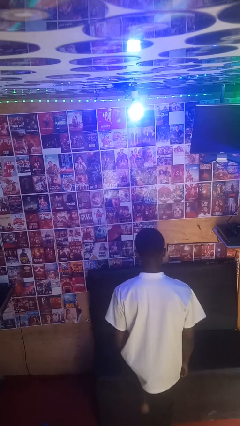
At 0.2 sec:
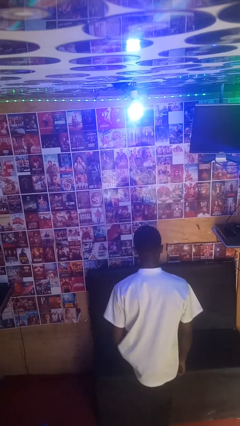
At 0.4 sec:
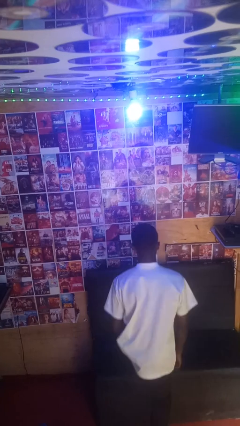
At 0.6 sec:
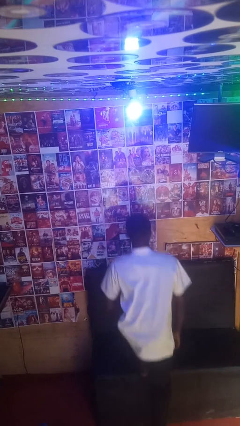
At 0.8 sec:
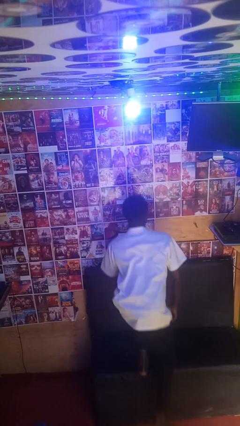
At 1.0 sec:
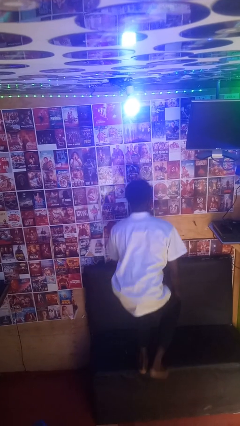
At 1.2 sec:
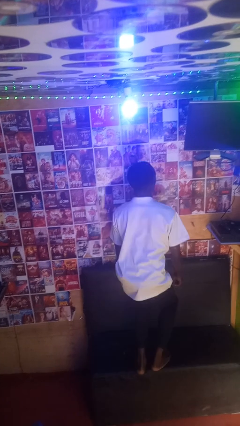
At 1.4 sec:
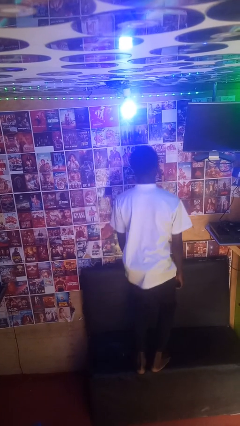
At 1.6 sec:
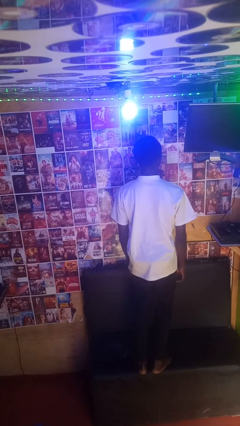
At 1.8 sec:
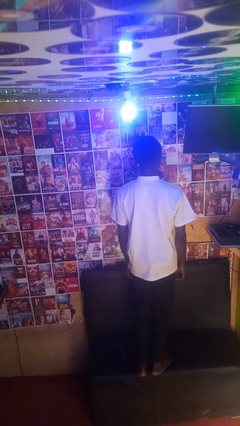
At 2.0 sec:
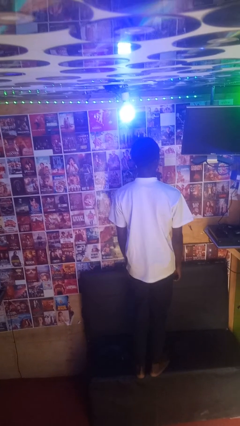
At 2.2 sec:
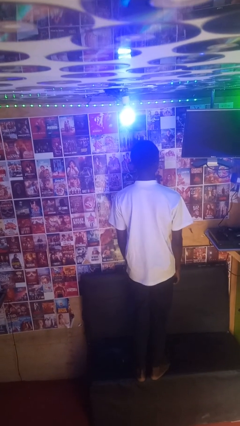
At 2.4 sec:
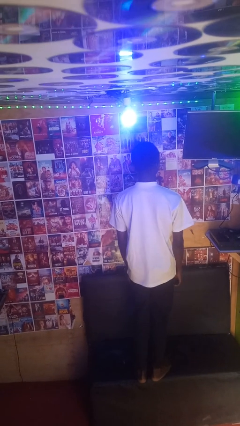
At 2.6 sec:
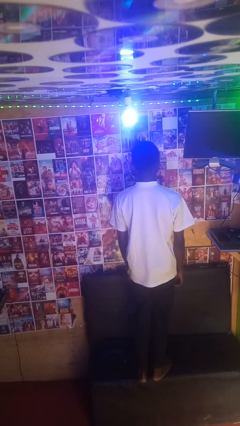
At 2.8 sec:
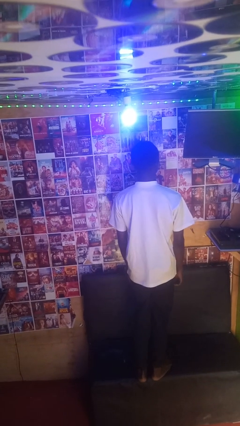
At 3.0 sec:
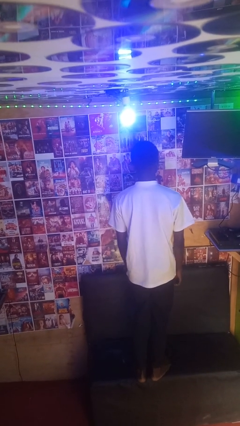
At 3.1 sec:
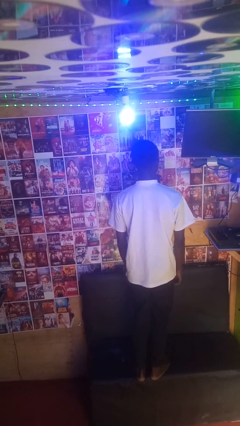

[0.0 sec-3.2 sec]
person climbs on couch

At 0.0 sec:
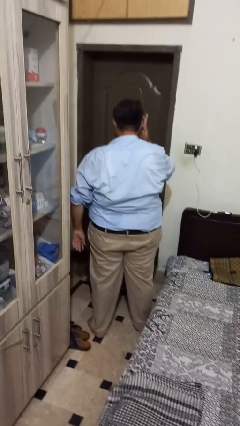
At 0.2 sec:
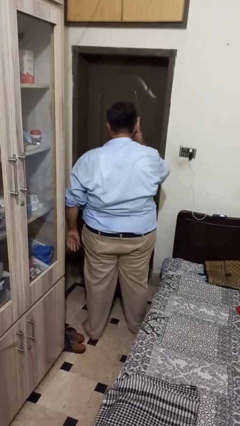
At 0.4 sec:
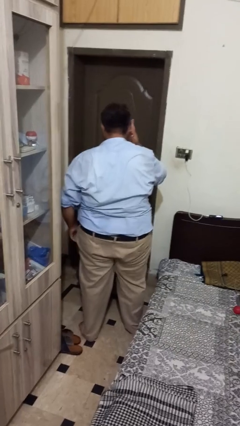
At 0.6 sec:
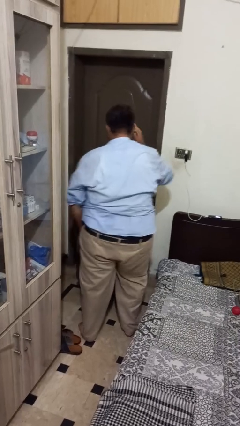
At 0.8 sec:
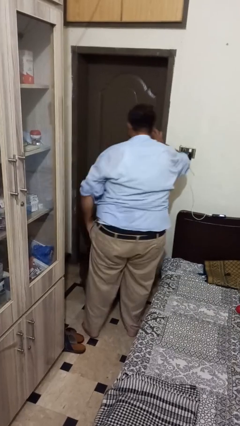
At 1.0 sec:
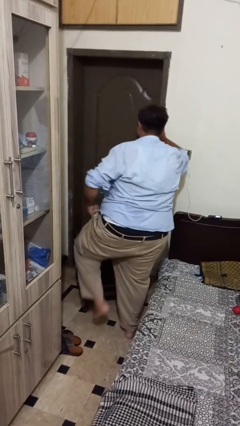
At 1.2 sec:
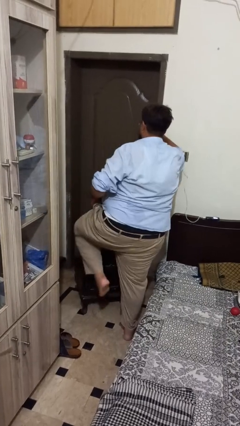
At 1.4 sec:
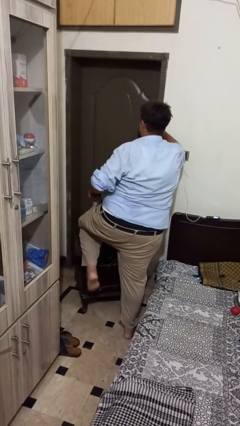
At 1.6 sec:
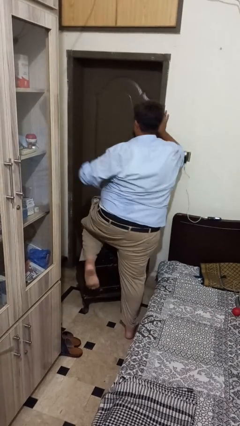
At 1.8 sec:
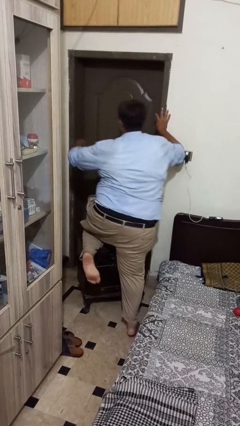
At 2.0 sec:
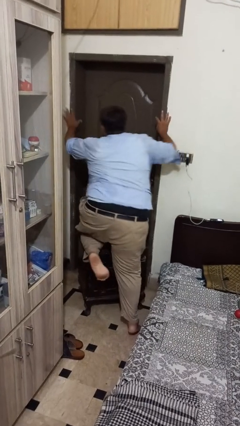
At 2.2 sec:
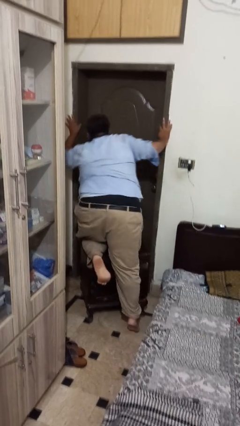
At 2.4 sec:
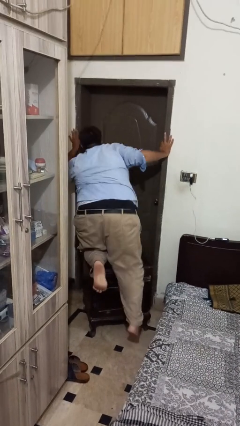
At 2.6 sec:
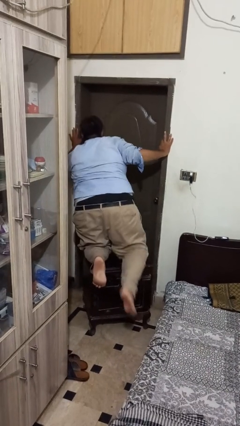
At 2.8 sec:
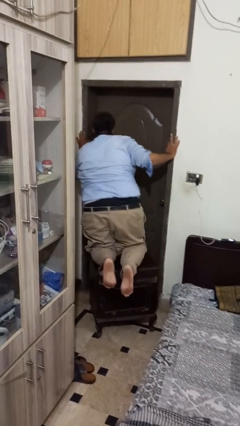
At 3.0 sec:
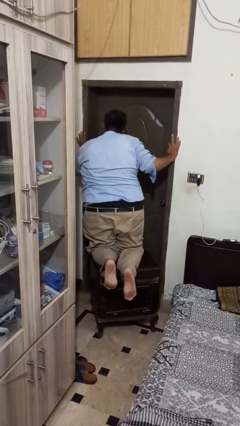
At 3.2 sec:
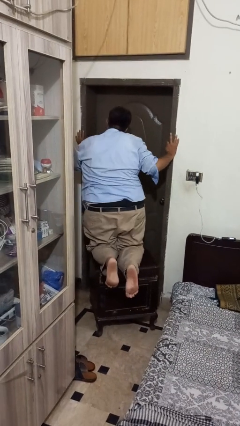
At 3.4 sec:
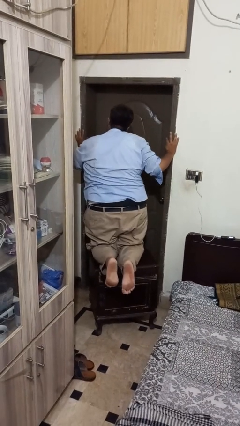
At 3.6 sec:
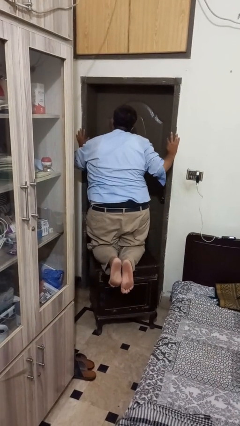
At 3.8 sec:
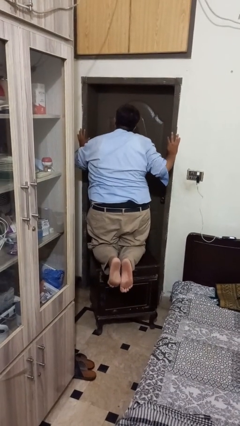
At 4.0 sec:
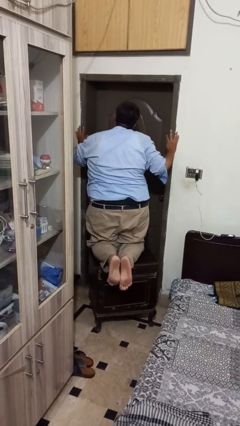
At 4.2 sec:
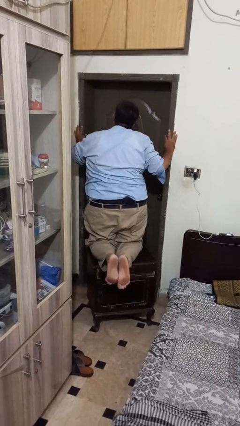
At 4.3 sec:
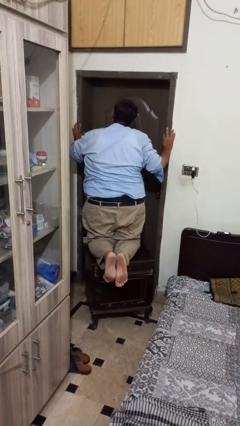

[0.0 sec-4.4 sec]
person climbs on table

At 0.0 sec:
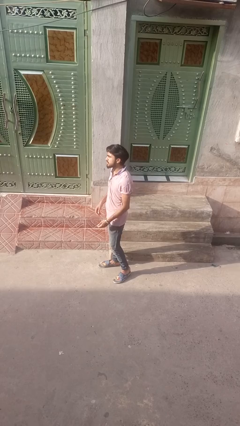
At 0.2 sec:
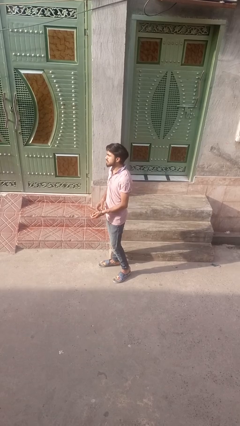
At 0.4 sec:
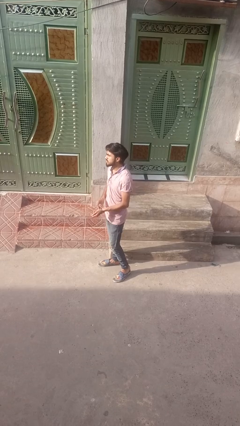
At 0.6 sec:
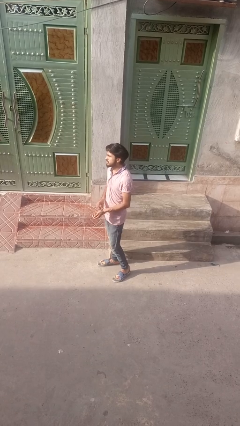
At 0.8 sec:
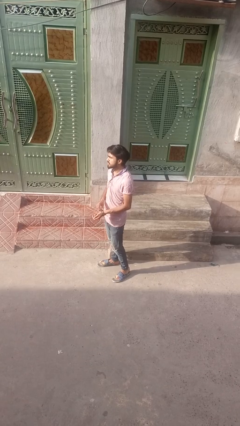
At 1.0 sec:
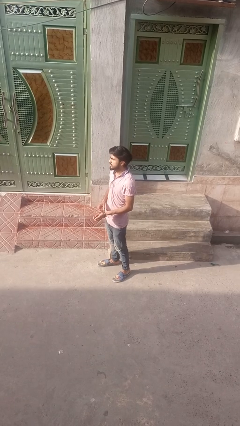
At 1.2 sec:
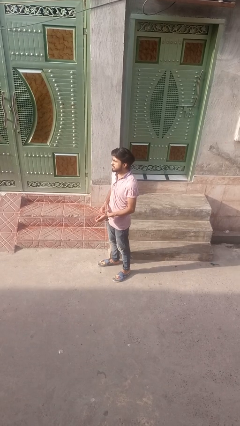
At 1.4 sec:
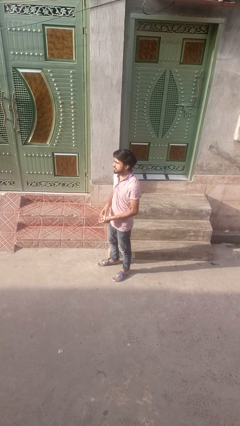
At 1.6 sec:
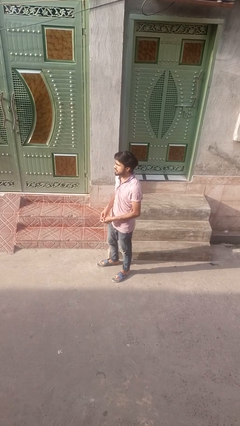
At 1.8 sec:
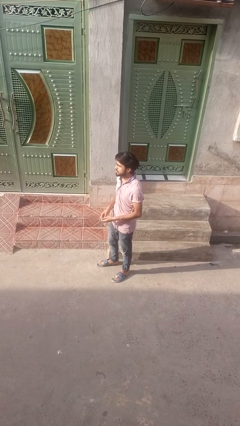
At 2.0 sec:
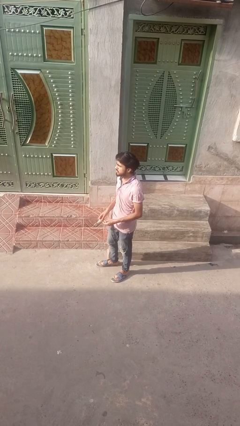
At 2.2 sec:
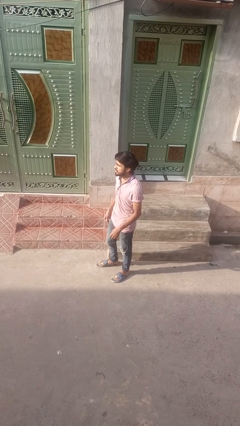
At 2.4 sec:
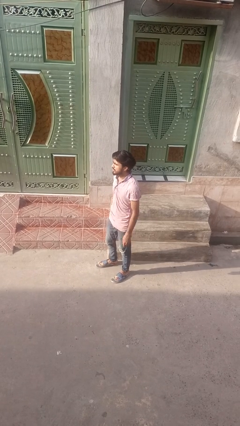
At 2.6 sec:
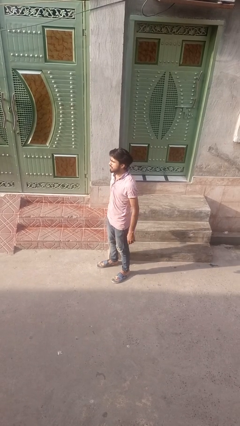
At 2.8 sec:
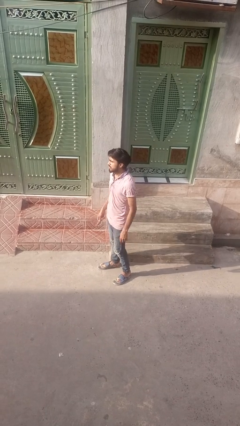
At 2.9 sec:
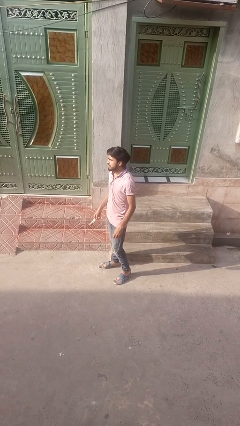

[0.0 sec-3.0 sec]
person takes off wristwatch

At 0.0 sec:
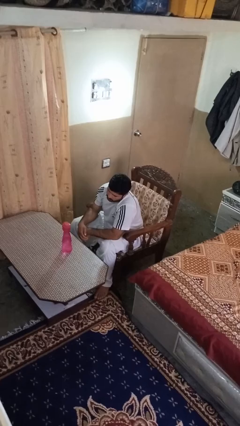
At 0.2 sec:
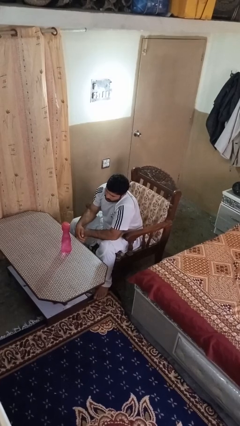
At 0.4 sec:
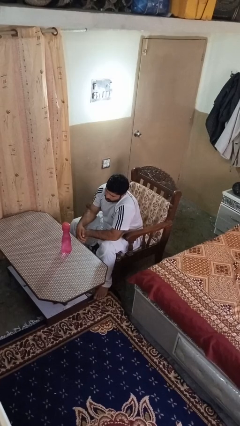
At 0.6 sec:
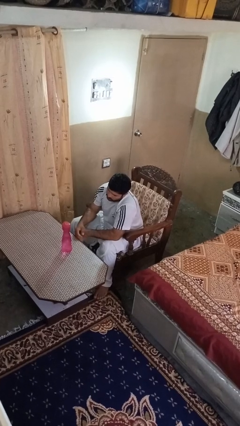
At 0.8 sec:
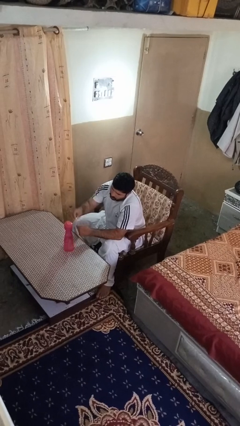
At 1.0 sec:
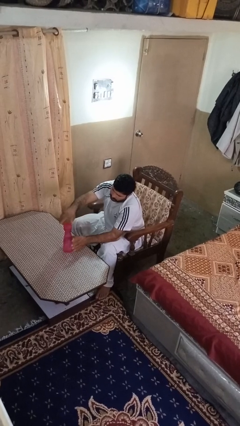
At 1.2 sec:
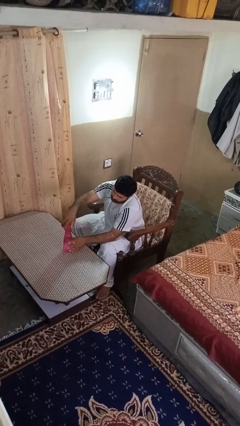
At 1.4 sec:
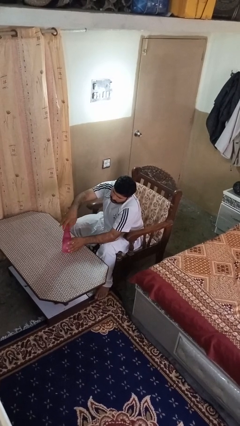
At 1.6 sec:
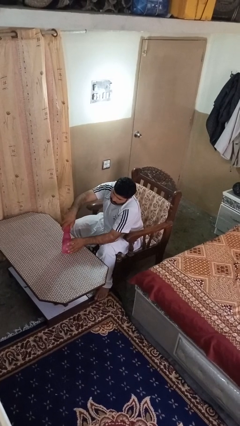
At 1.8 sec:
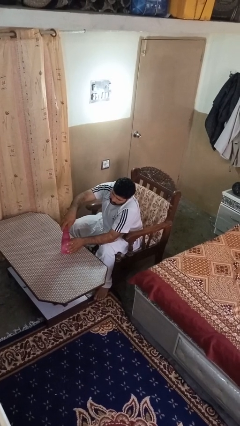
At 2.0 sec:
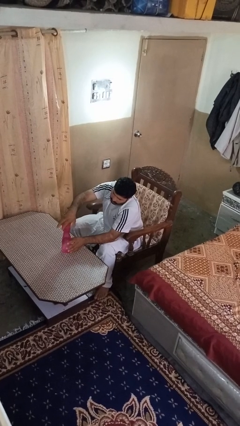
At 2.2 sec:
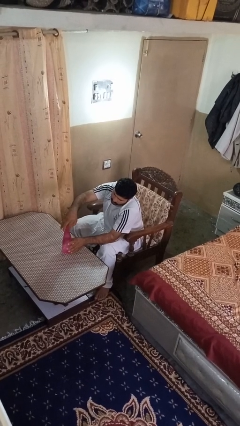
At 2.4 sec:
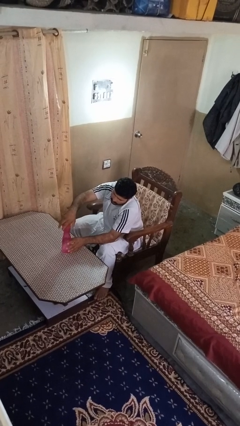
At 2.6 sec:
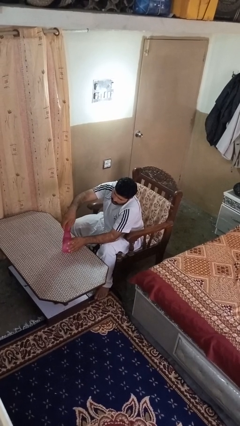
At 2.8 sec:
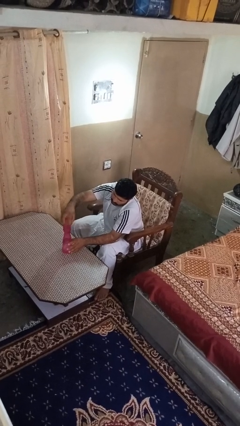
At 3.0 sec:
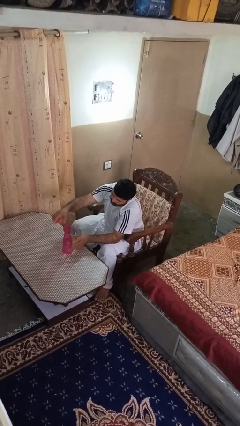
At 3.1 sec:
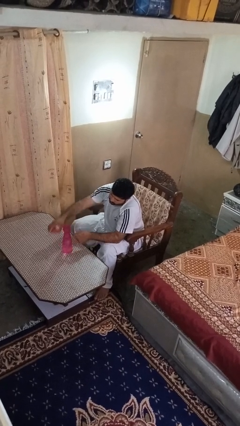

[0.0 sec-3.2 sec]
person unscrews lid from bottle

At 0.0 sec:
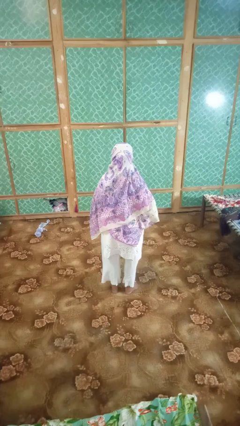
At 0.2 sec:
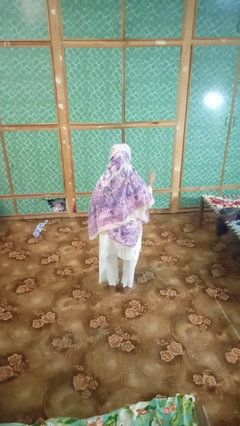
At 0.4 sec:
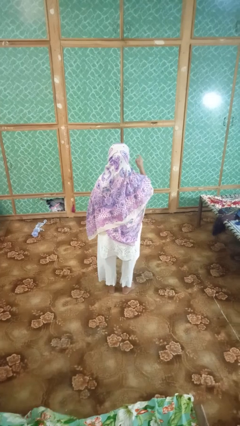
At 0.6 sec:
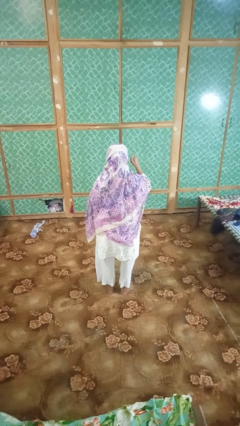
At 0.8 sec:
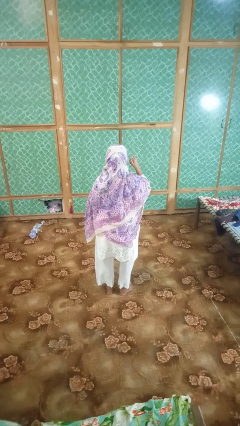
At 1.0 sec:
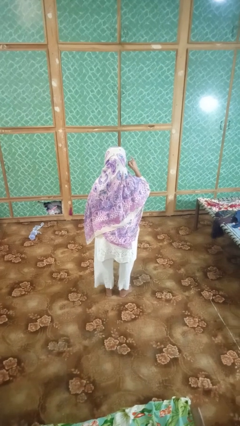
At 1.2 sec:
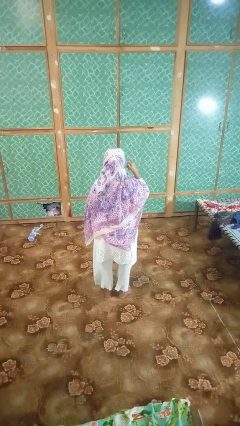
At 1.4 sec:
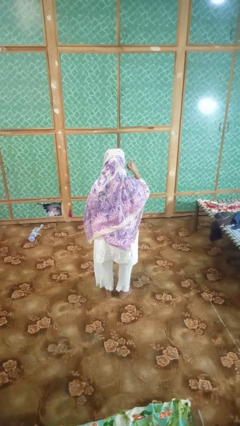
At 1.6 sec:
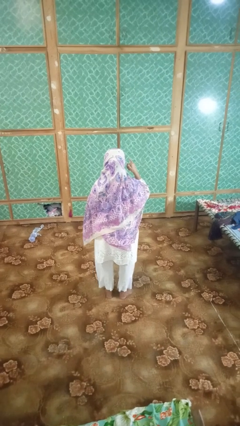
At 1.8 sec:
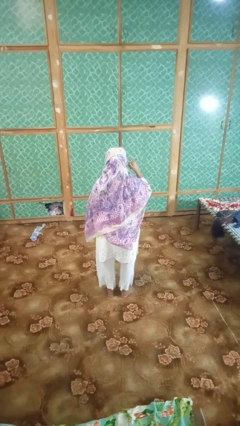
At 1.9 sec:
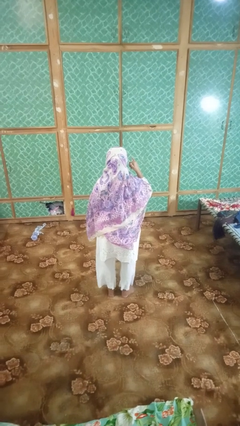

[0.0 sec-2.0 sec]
person gestures call me

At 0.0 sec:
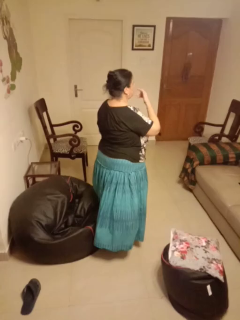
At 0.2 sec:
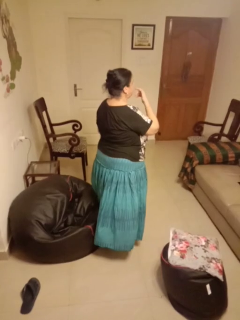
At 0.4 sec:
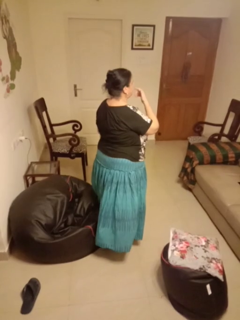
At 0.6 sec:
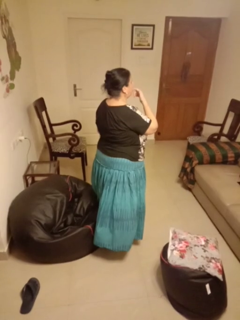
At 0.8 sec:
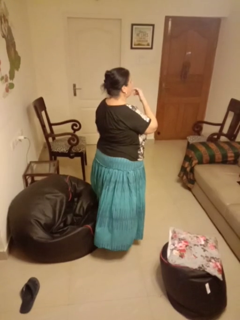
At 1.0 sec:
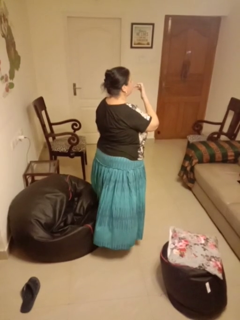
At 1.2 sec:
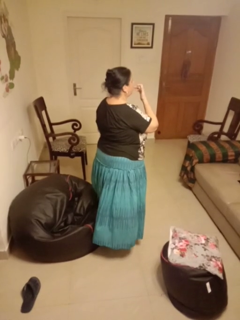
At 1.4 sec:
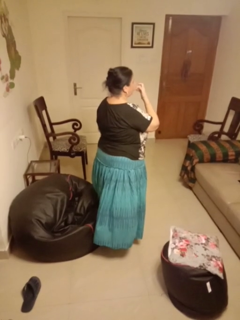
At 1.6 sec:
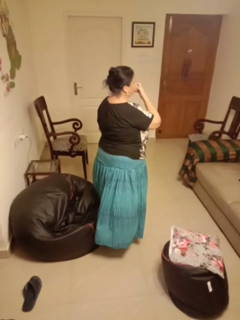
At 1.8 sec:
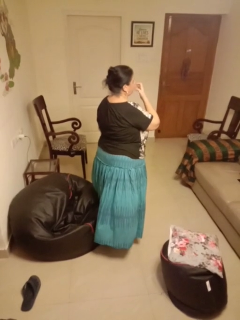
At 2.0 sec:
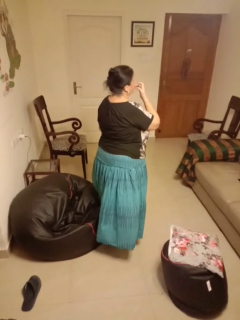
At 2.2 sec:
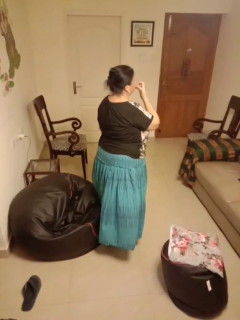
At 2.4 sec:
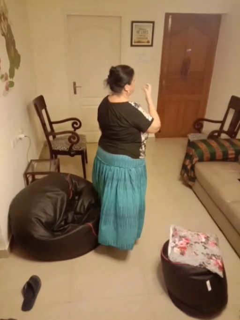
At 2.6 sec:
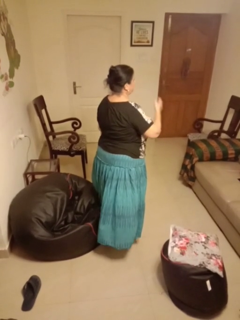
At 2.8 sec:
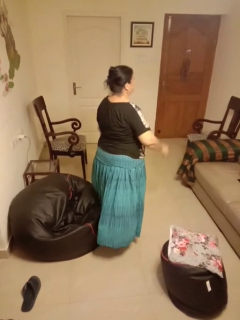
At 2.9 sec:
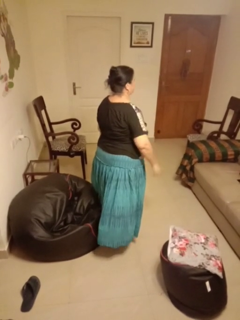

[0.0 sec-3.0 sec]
person licks fingers
